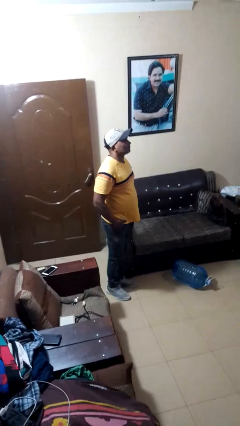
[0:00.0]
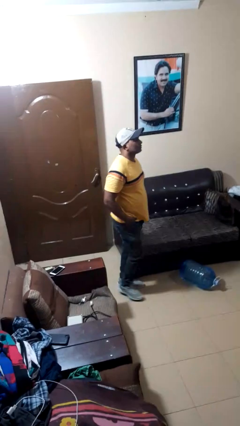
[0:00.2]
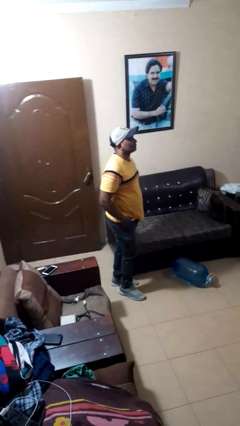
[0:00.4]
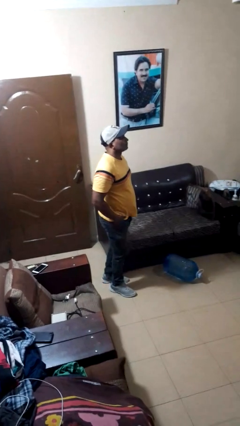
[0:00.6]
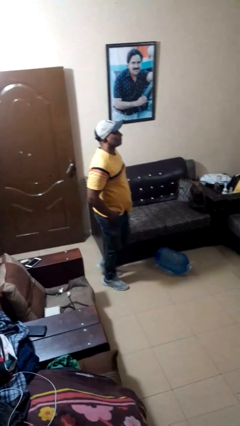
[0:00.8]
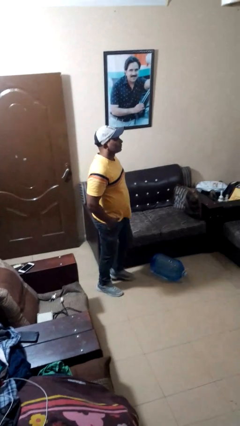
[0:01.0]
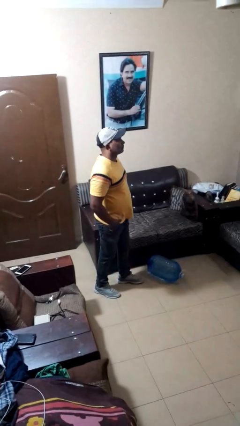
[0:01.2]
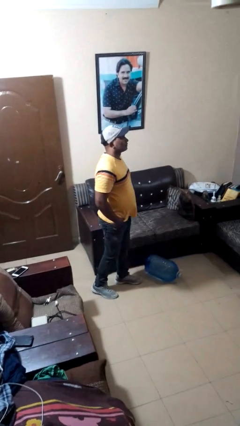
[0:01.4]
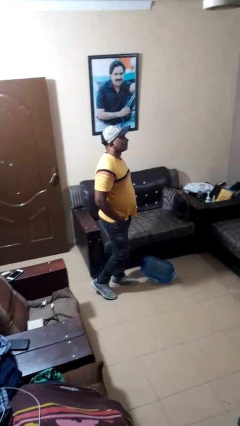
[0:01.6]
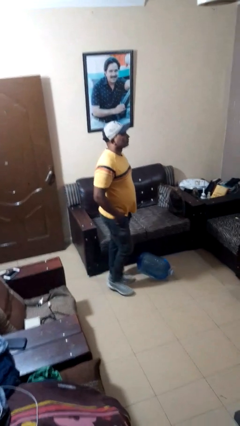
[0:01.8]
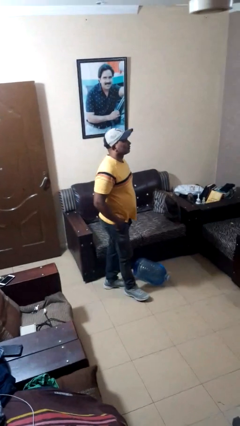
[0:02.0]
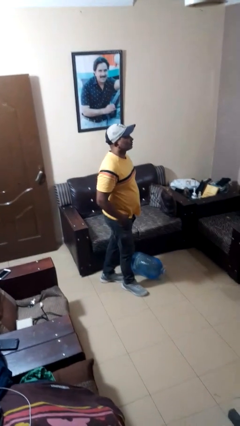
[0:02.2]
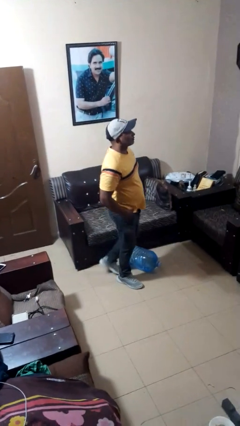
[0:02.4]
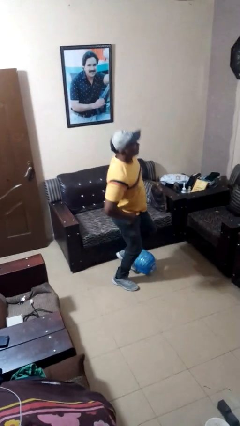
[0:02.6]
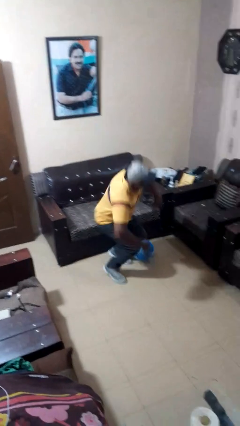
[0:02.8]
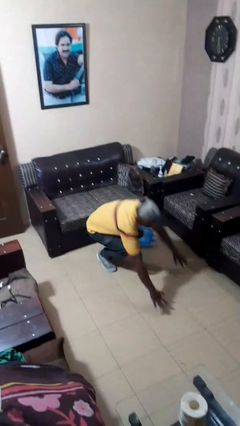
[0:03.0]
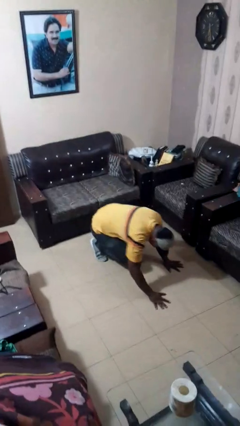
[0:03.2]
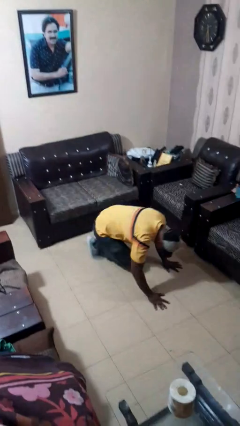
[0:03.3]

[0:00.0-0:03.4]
person trips on object on floor

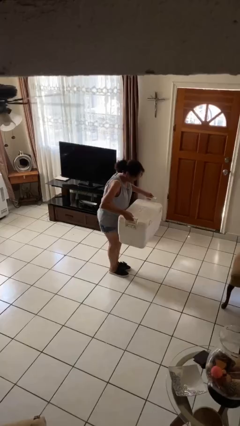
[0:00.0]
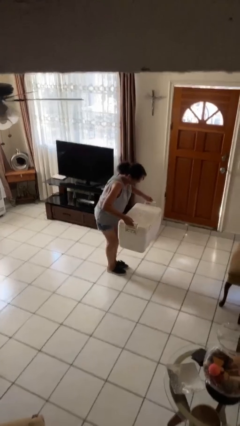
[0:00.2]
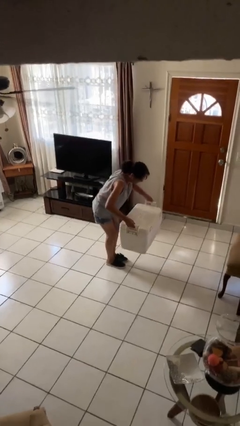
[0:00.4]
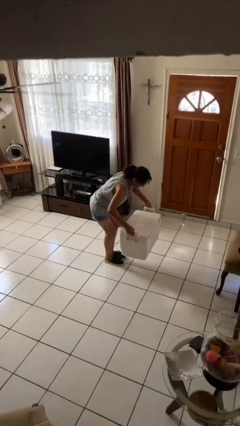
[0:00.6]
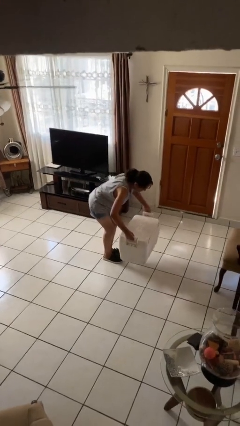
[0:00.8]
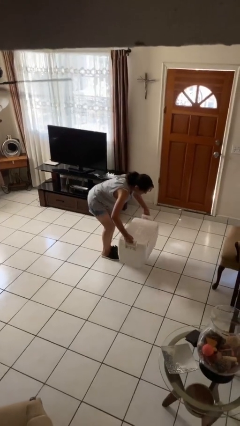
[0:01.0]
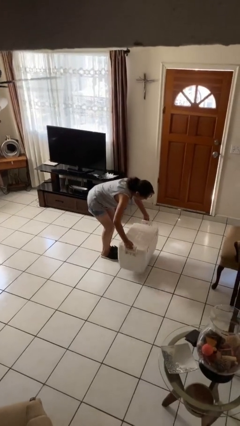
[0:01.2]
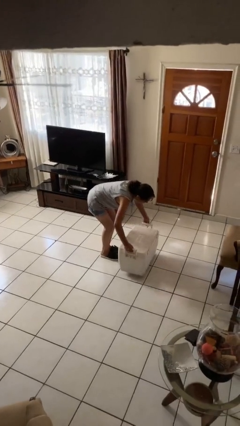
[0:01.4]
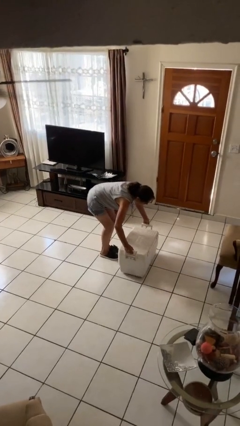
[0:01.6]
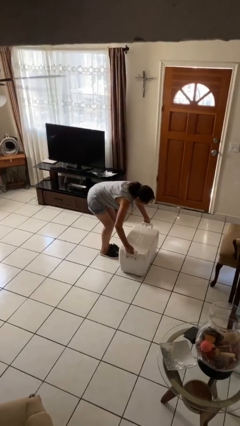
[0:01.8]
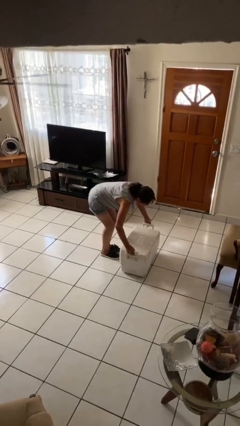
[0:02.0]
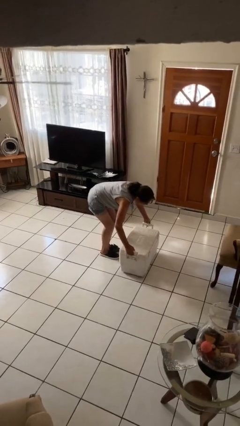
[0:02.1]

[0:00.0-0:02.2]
person puts down object on floor

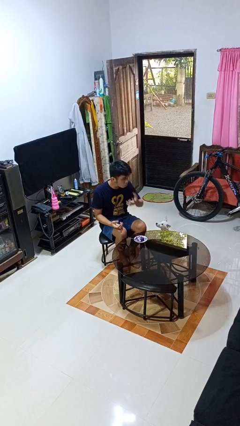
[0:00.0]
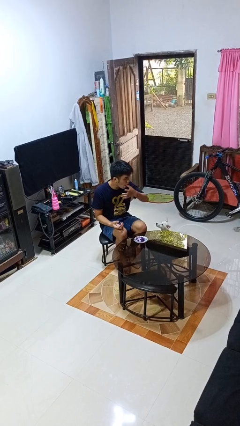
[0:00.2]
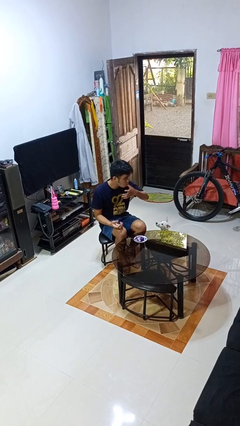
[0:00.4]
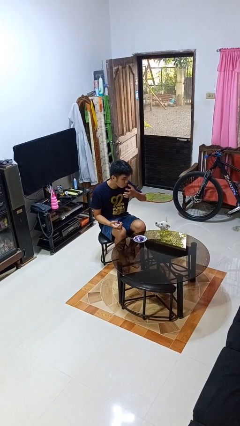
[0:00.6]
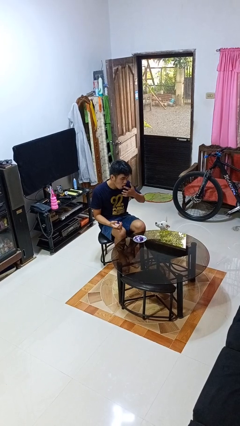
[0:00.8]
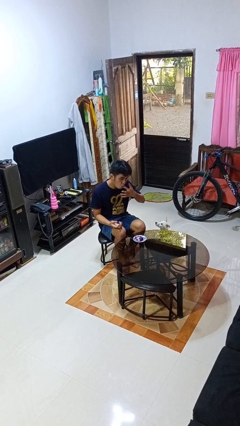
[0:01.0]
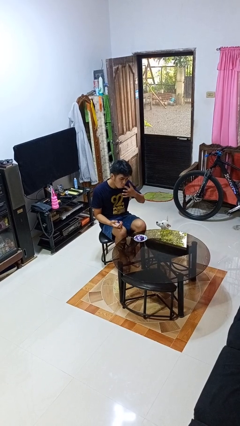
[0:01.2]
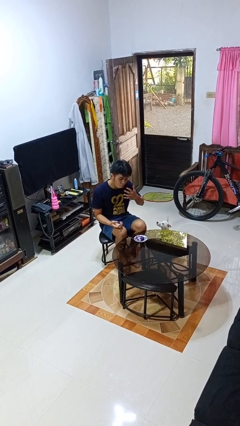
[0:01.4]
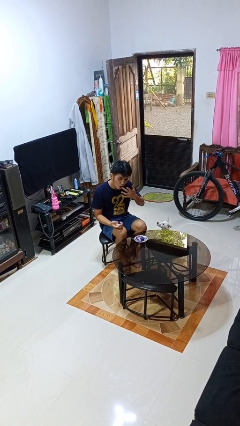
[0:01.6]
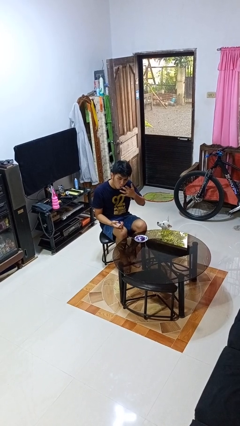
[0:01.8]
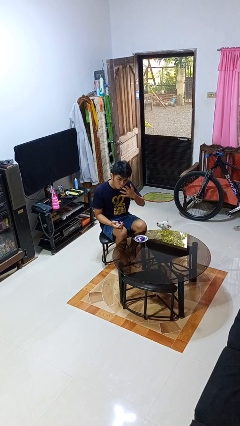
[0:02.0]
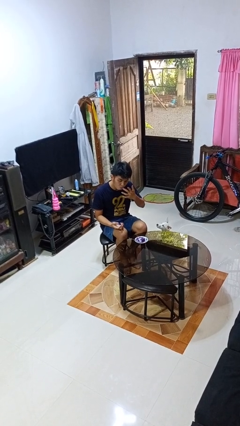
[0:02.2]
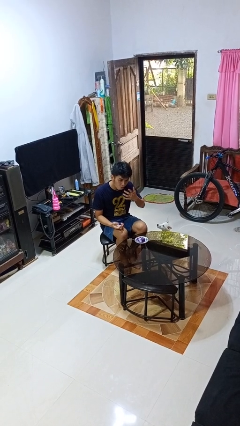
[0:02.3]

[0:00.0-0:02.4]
person licks fingers

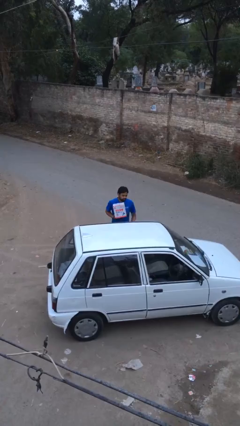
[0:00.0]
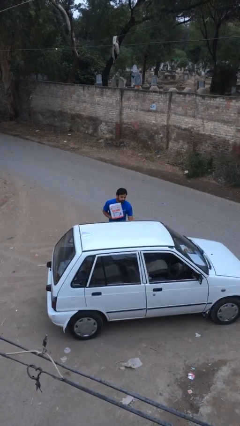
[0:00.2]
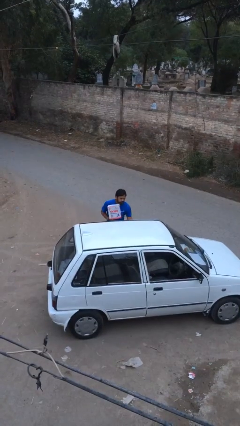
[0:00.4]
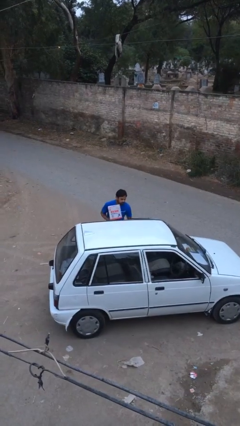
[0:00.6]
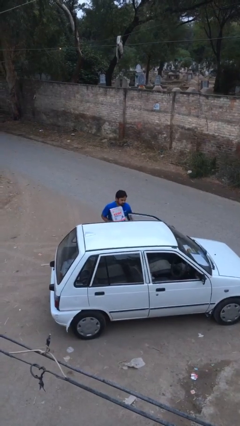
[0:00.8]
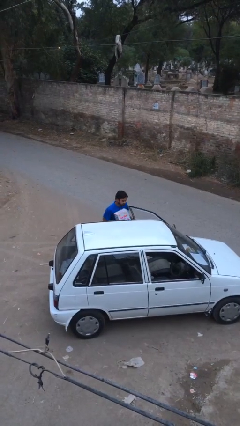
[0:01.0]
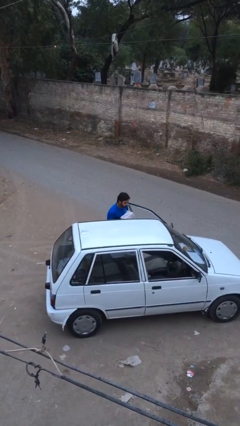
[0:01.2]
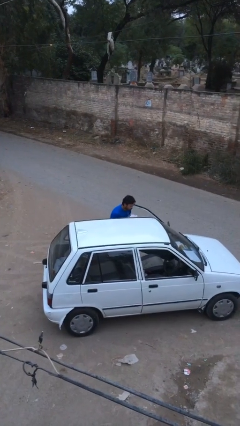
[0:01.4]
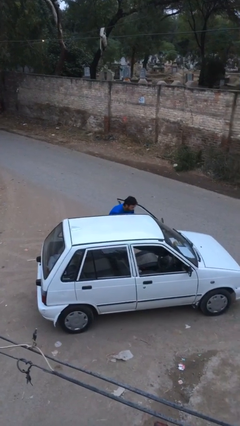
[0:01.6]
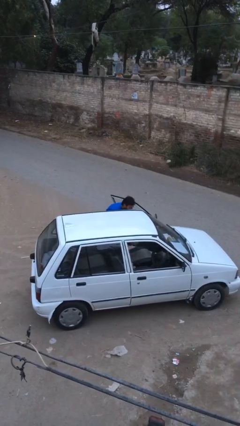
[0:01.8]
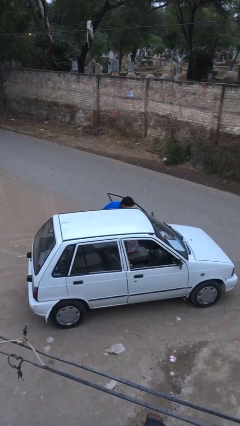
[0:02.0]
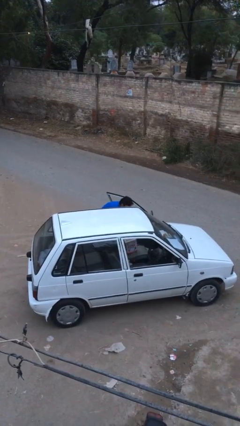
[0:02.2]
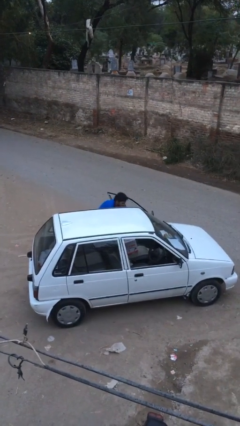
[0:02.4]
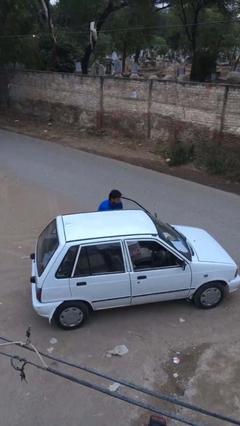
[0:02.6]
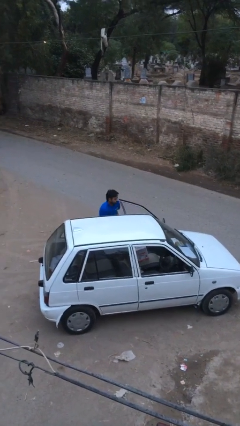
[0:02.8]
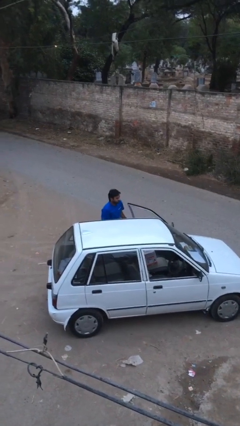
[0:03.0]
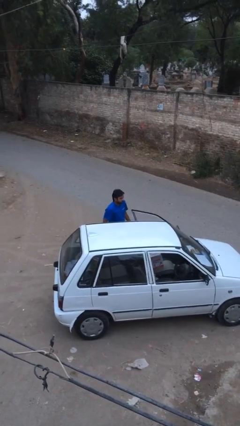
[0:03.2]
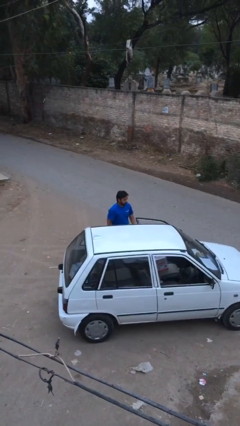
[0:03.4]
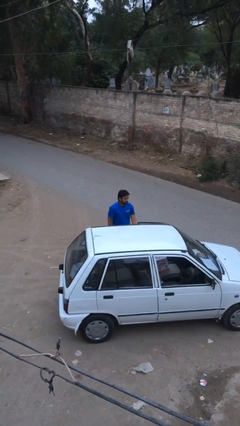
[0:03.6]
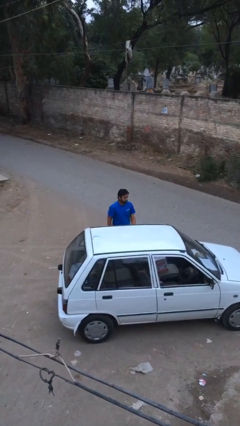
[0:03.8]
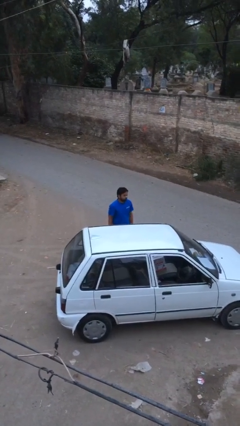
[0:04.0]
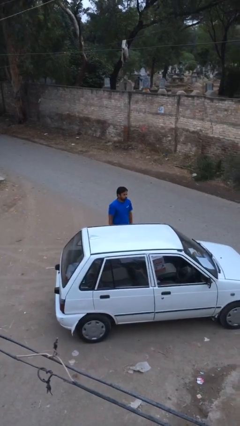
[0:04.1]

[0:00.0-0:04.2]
person loads car

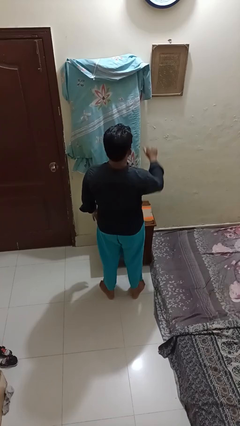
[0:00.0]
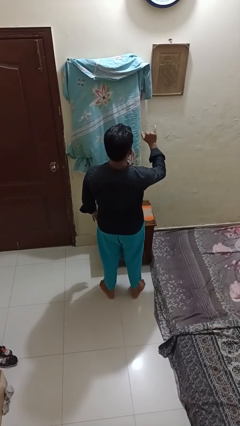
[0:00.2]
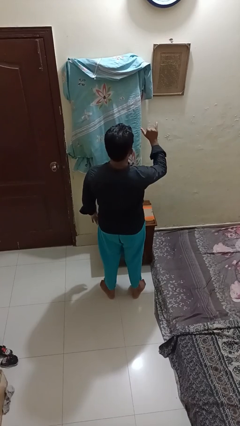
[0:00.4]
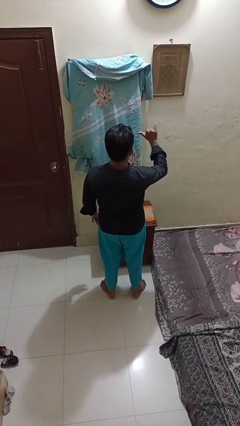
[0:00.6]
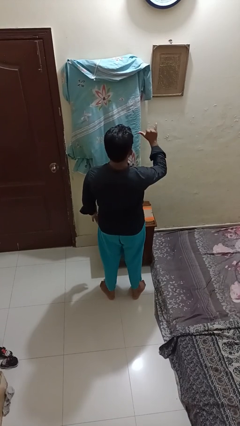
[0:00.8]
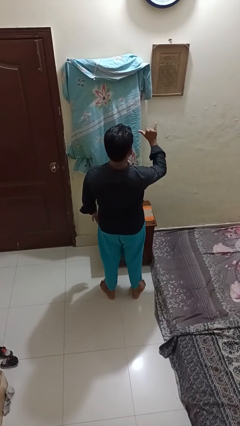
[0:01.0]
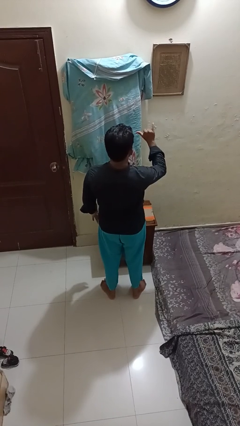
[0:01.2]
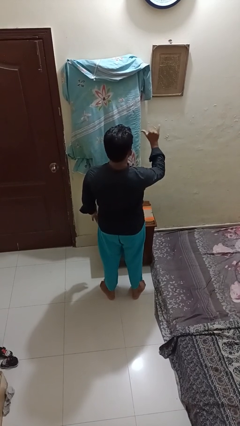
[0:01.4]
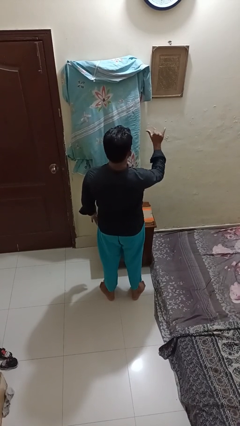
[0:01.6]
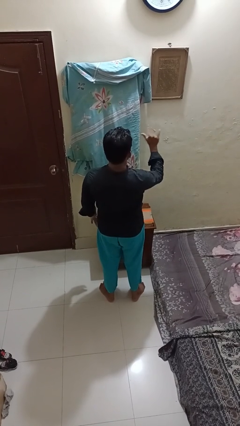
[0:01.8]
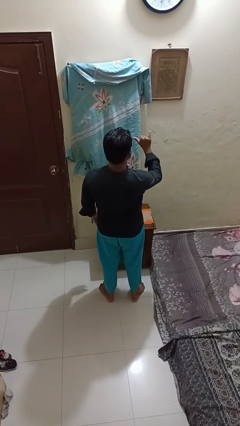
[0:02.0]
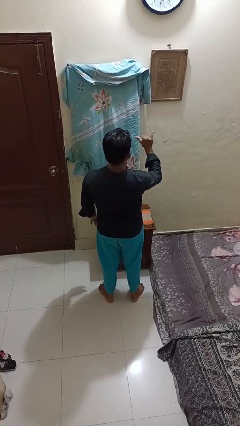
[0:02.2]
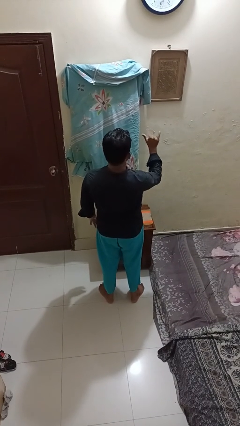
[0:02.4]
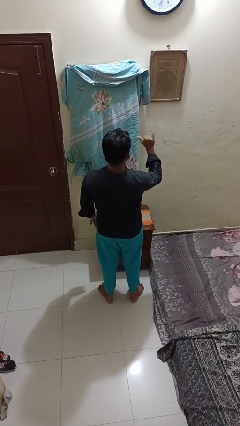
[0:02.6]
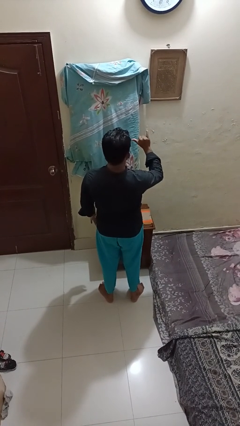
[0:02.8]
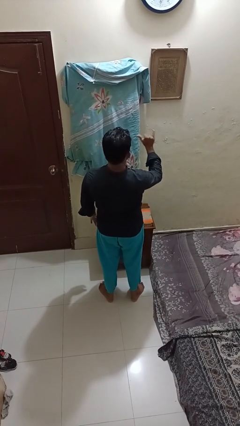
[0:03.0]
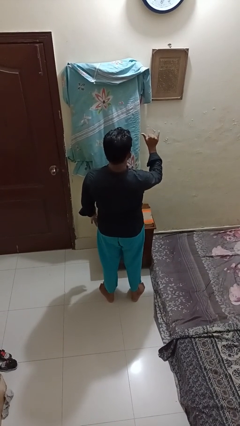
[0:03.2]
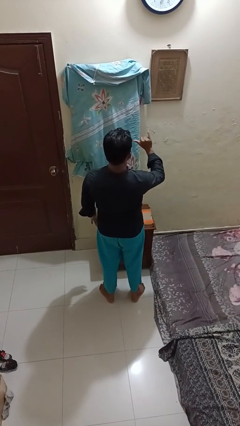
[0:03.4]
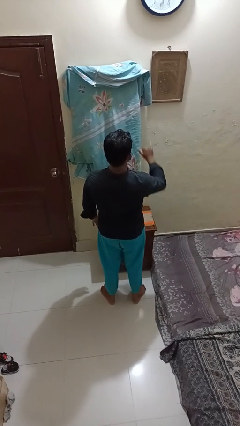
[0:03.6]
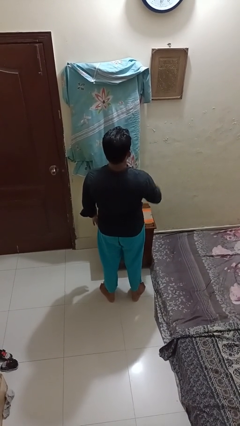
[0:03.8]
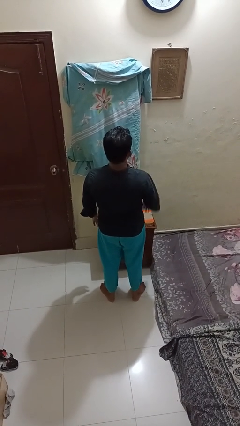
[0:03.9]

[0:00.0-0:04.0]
person gestures hang loose

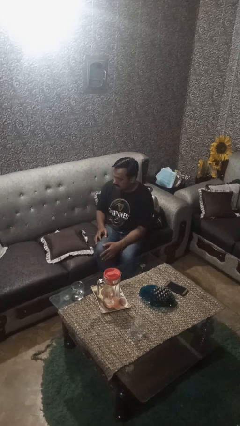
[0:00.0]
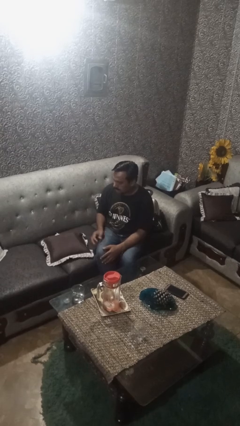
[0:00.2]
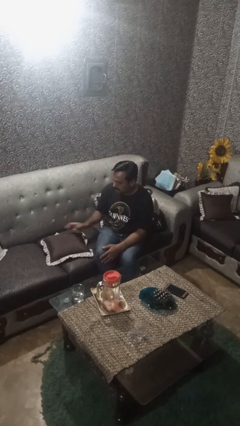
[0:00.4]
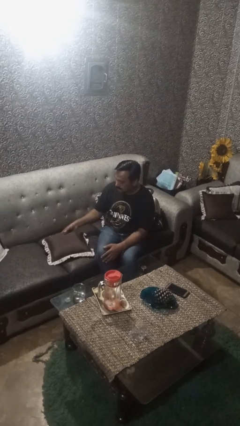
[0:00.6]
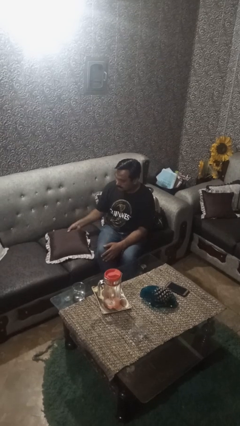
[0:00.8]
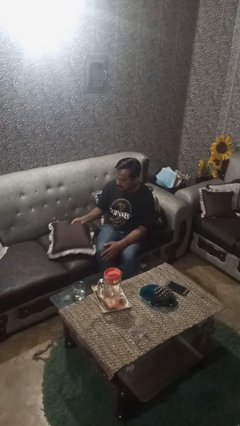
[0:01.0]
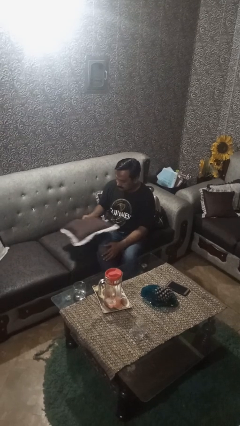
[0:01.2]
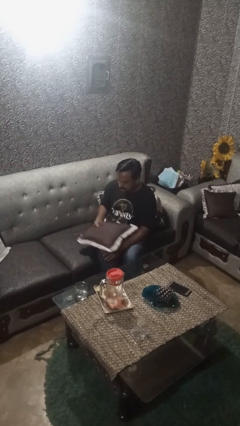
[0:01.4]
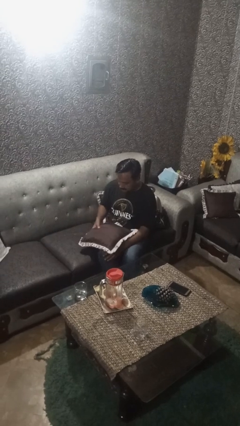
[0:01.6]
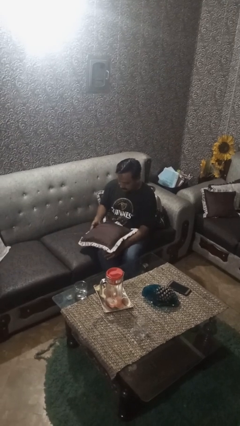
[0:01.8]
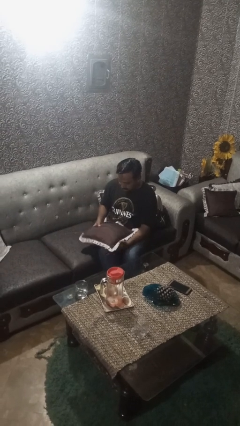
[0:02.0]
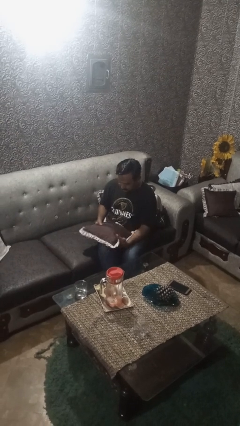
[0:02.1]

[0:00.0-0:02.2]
person picks up object from couch
